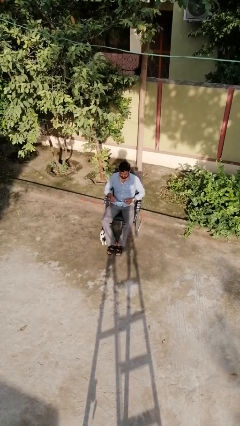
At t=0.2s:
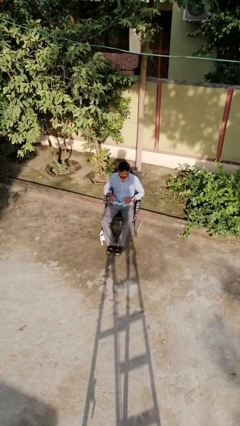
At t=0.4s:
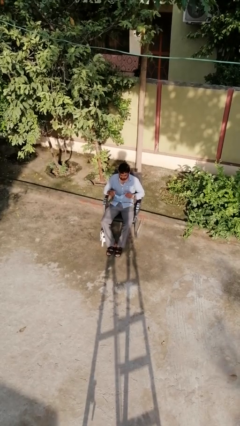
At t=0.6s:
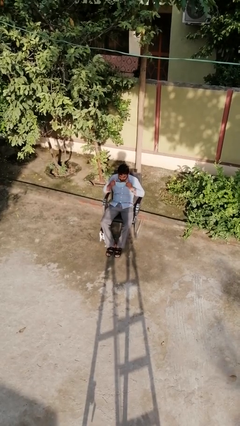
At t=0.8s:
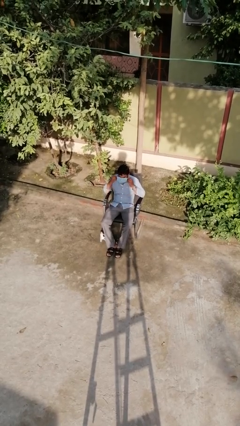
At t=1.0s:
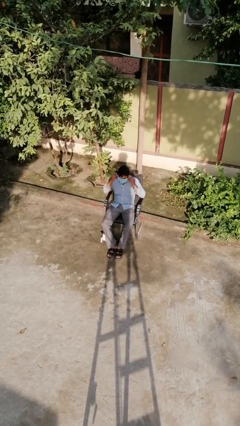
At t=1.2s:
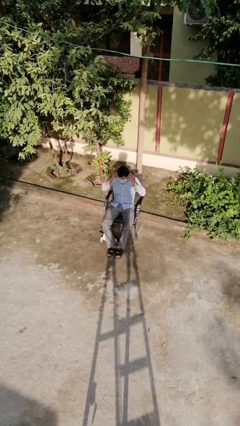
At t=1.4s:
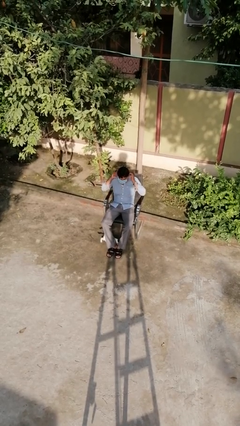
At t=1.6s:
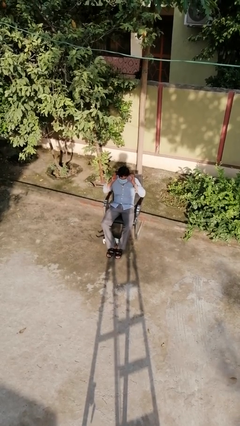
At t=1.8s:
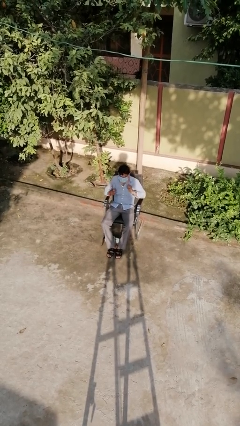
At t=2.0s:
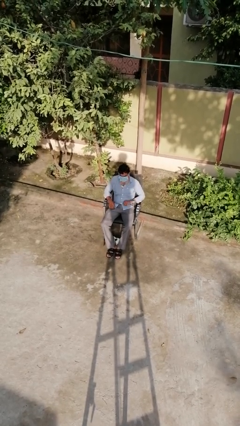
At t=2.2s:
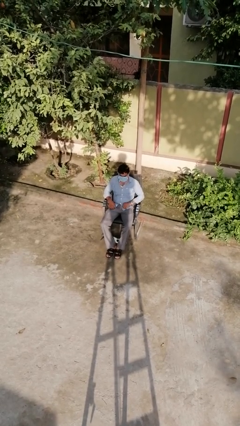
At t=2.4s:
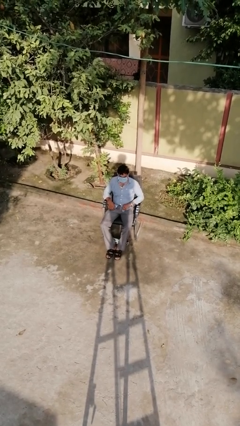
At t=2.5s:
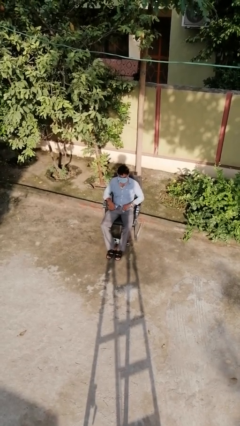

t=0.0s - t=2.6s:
person puts on facemask

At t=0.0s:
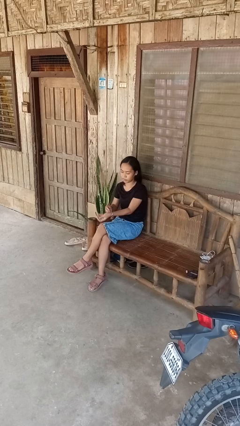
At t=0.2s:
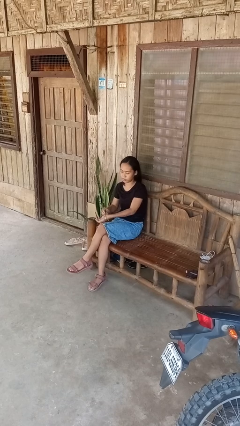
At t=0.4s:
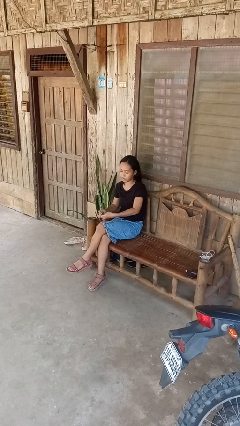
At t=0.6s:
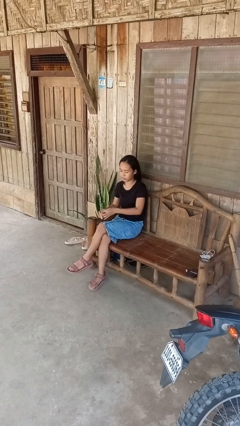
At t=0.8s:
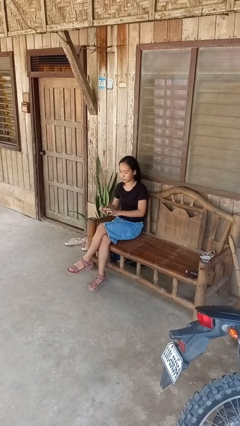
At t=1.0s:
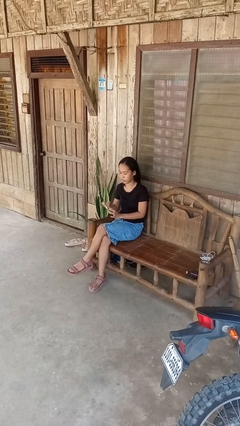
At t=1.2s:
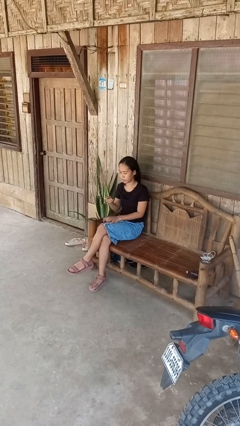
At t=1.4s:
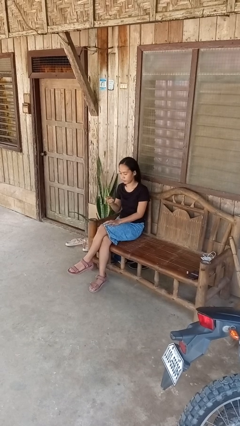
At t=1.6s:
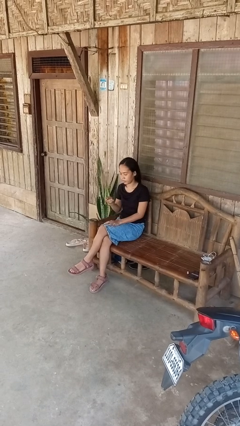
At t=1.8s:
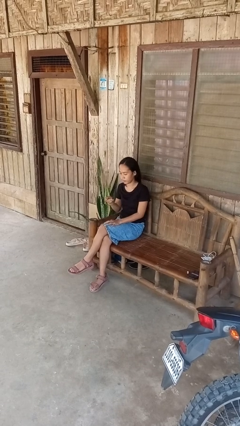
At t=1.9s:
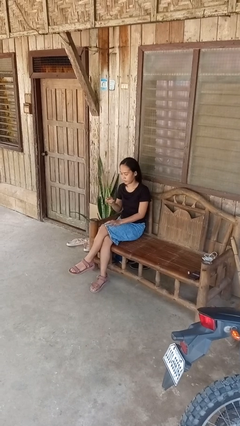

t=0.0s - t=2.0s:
person takes off wristwatch

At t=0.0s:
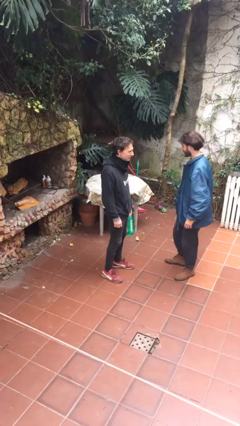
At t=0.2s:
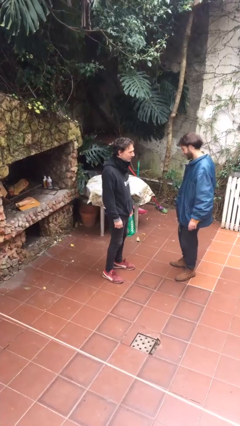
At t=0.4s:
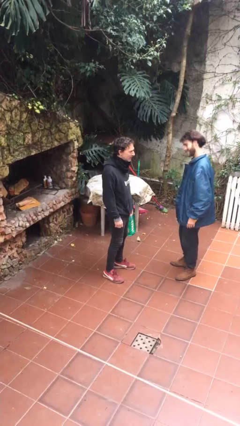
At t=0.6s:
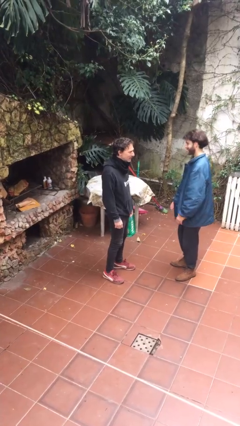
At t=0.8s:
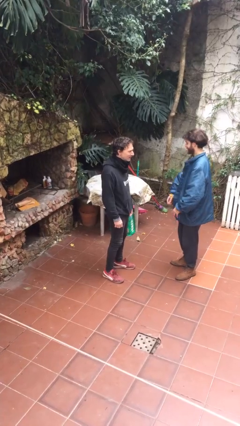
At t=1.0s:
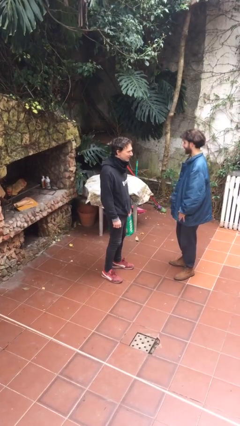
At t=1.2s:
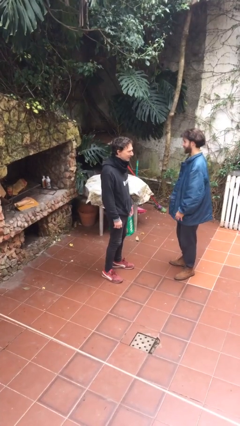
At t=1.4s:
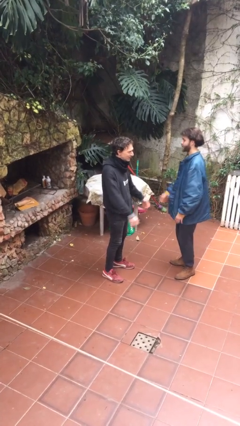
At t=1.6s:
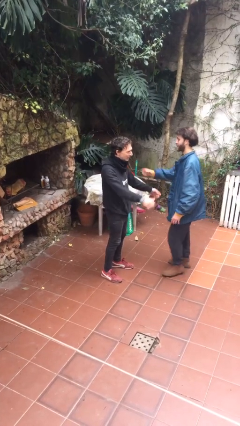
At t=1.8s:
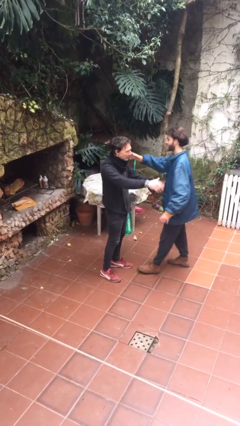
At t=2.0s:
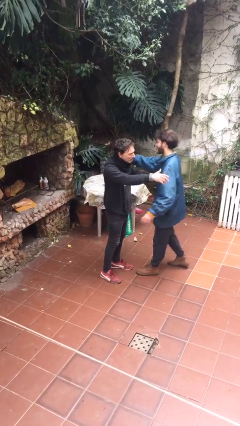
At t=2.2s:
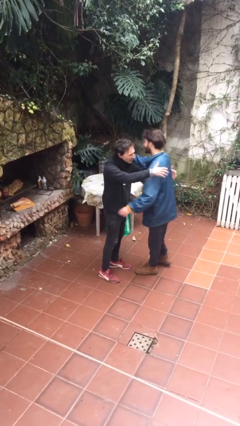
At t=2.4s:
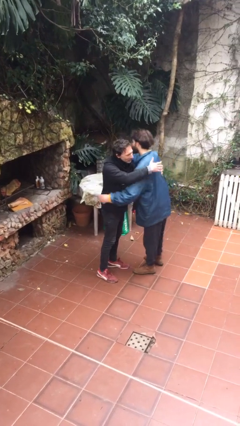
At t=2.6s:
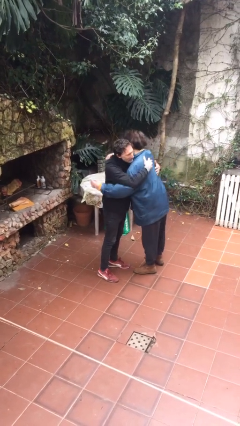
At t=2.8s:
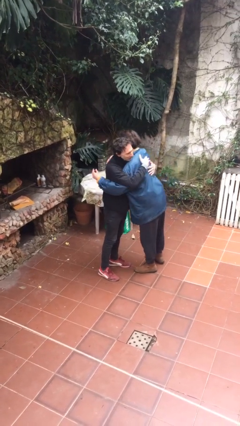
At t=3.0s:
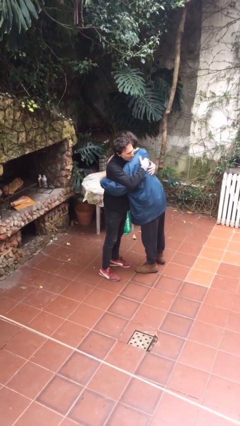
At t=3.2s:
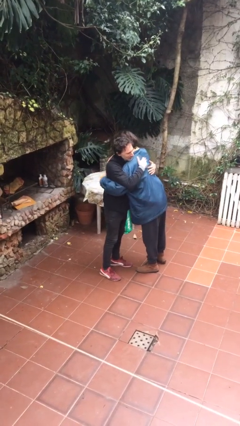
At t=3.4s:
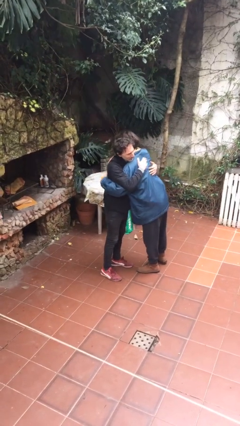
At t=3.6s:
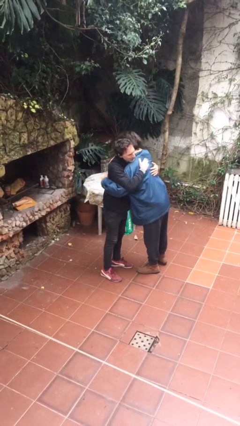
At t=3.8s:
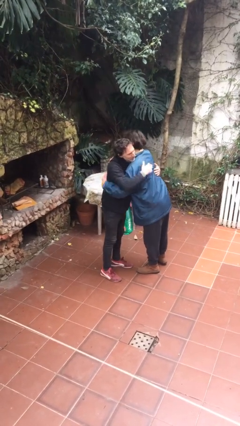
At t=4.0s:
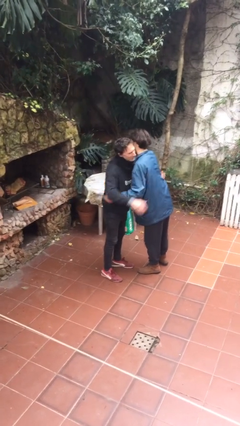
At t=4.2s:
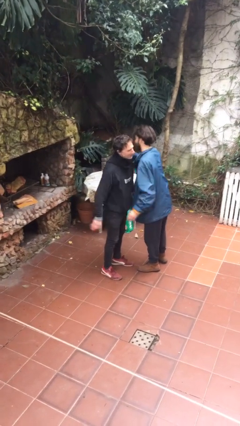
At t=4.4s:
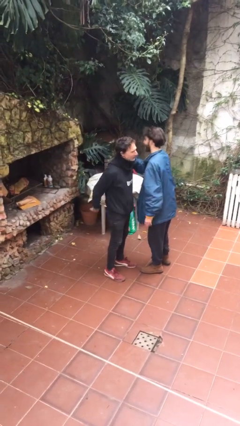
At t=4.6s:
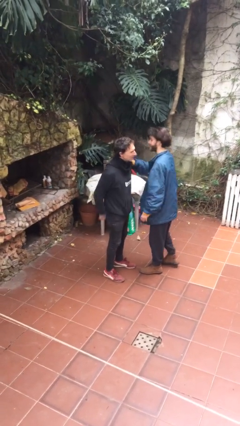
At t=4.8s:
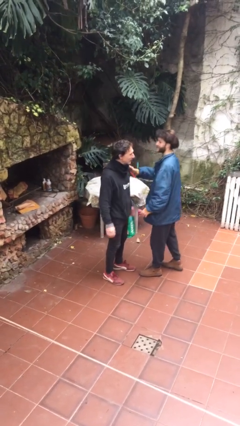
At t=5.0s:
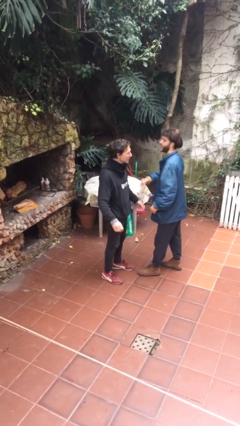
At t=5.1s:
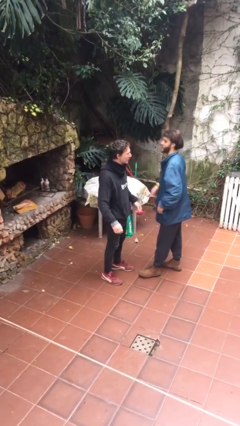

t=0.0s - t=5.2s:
person embraces person

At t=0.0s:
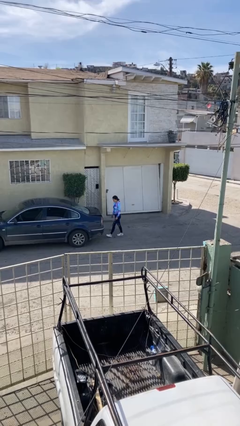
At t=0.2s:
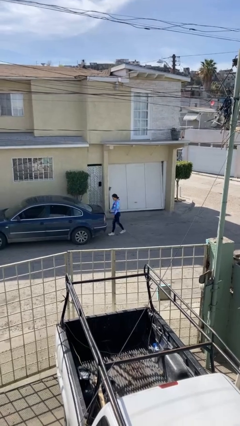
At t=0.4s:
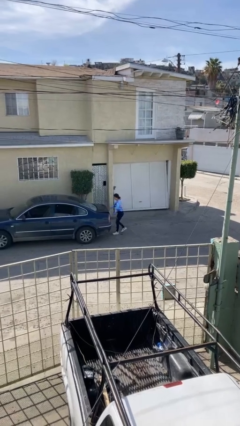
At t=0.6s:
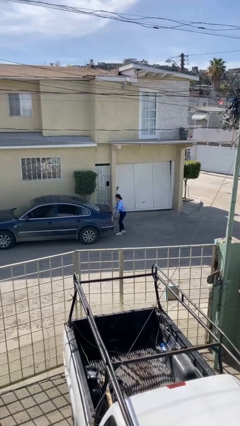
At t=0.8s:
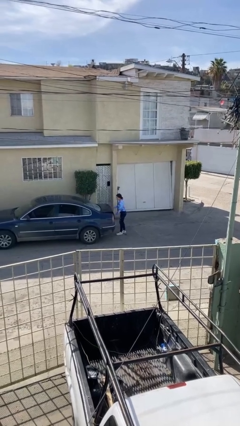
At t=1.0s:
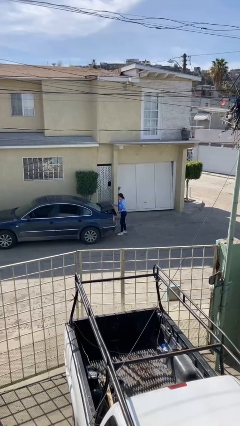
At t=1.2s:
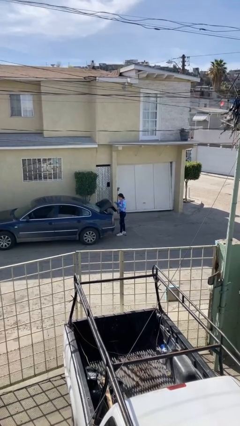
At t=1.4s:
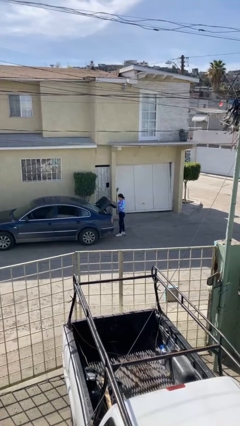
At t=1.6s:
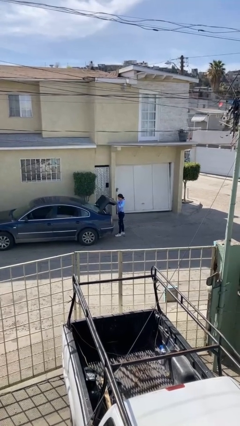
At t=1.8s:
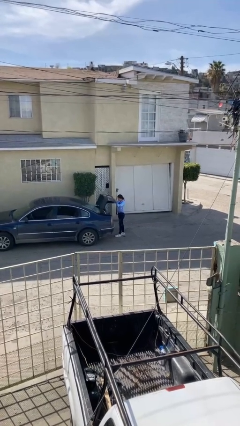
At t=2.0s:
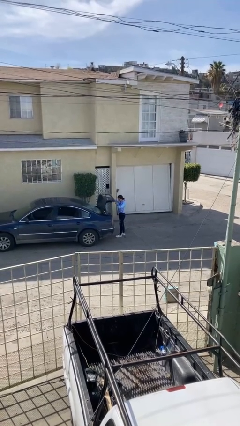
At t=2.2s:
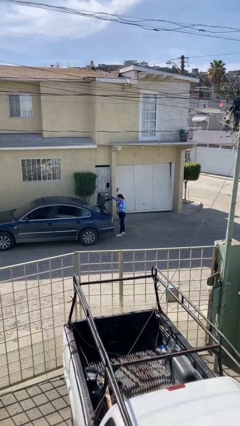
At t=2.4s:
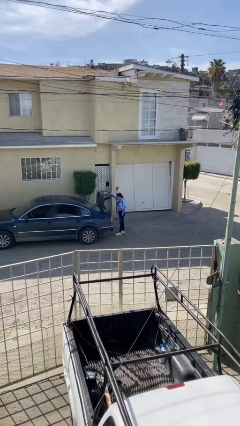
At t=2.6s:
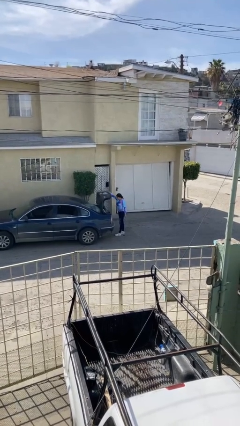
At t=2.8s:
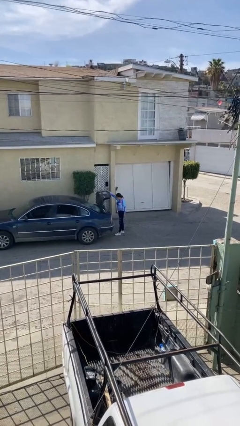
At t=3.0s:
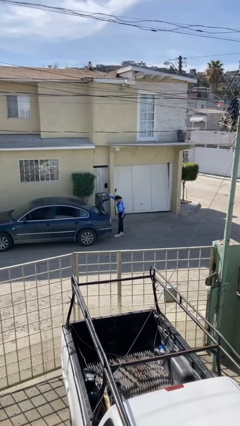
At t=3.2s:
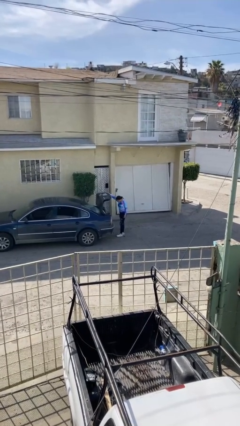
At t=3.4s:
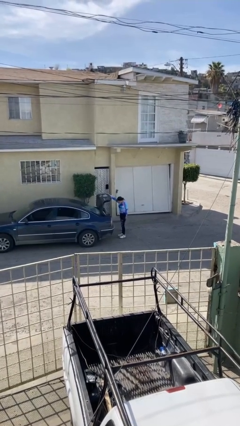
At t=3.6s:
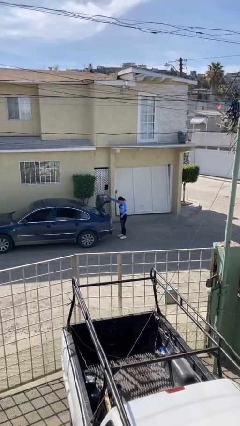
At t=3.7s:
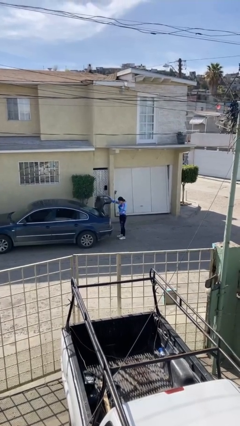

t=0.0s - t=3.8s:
person opens car trunk

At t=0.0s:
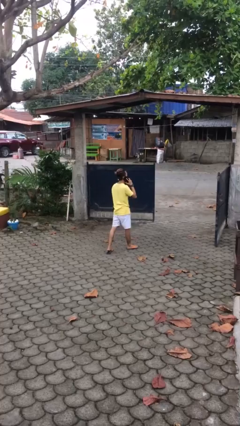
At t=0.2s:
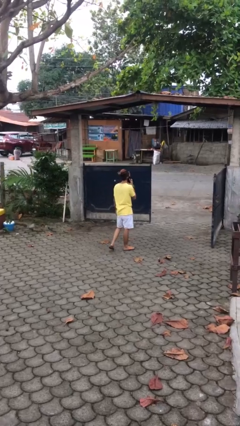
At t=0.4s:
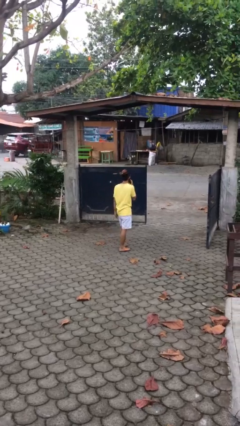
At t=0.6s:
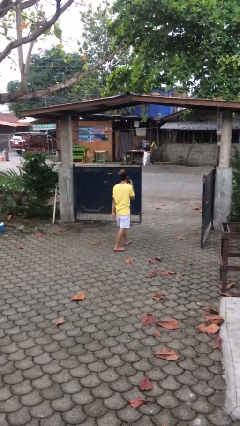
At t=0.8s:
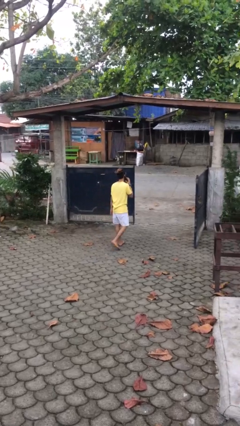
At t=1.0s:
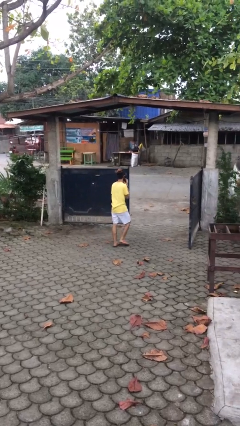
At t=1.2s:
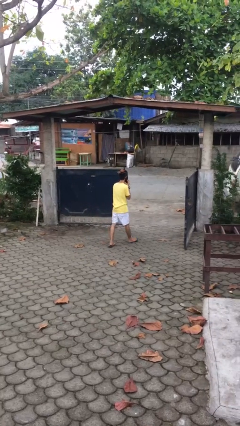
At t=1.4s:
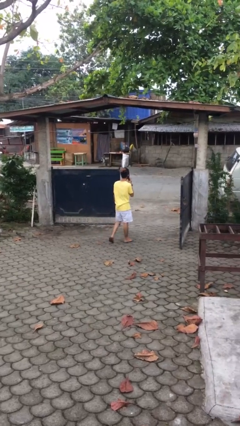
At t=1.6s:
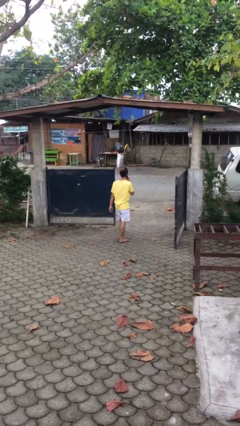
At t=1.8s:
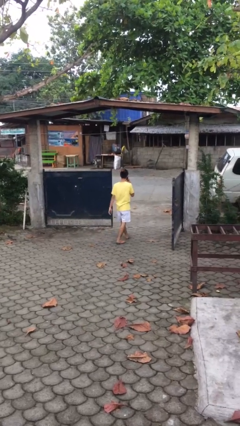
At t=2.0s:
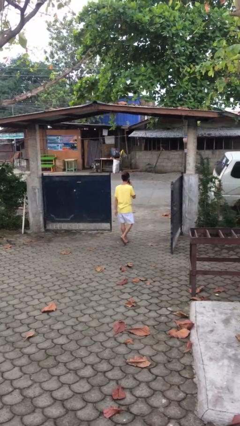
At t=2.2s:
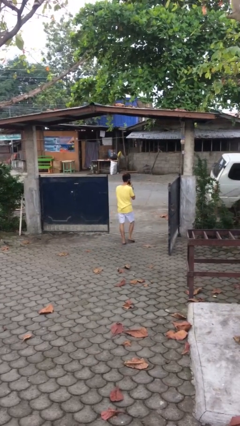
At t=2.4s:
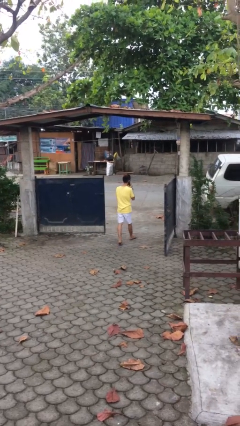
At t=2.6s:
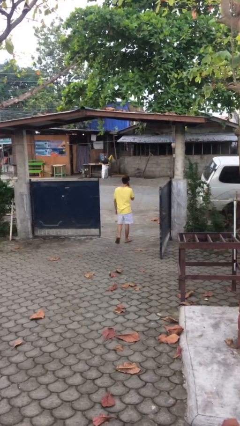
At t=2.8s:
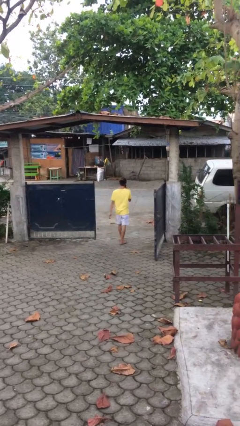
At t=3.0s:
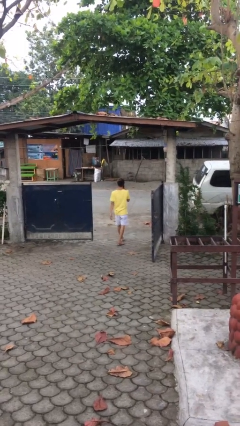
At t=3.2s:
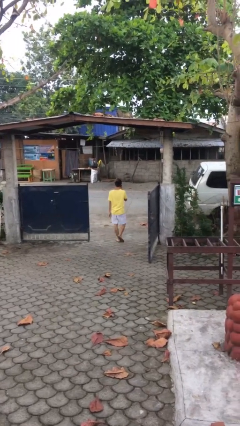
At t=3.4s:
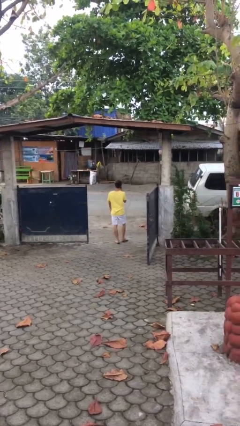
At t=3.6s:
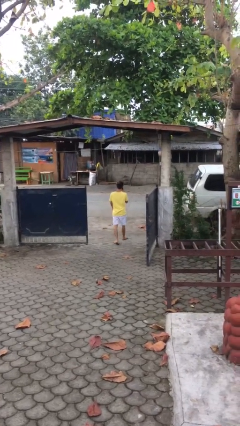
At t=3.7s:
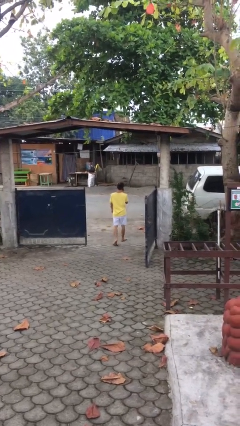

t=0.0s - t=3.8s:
person exits scene through structure
